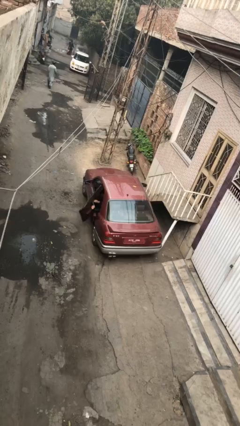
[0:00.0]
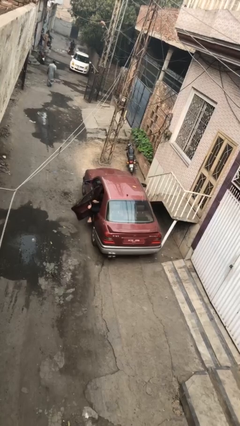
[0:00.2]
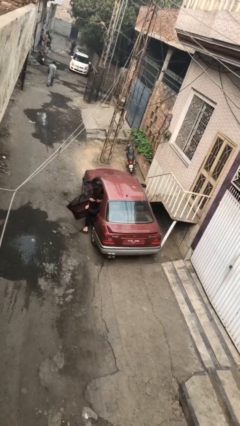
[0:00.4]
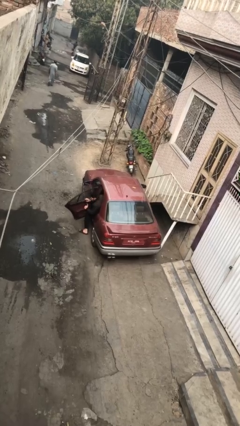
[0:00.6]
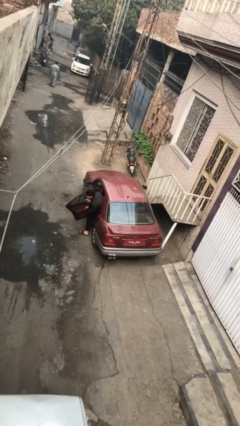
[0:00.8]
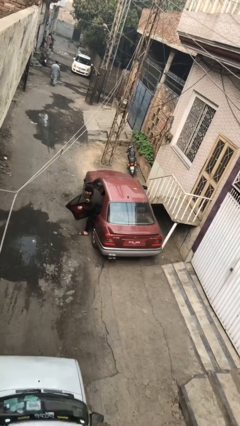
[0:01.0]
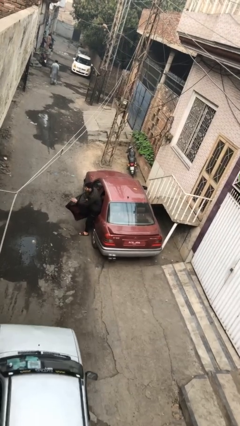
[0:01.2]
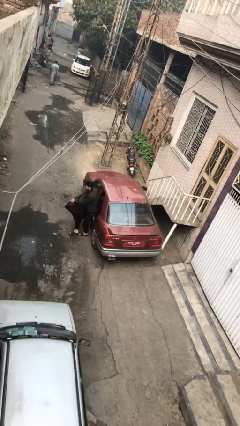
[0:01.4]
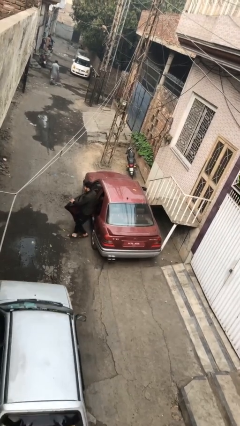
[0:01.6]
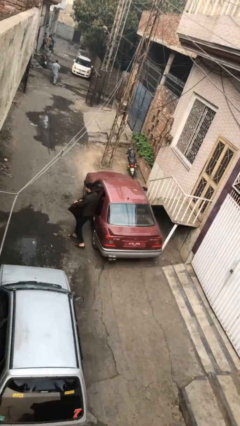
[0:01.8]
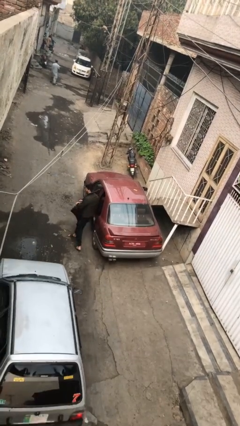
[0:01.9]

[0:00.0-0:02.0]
car drops off person

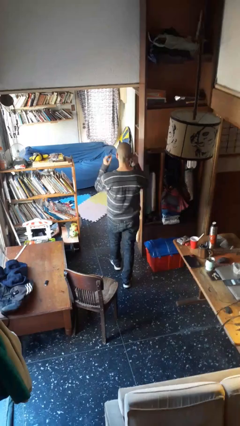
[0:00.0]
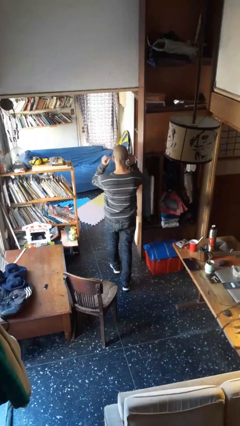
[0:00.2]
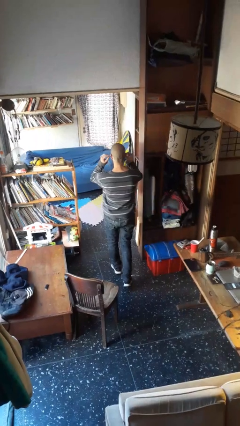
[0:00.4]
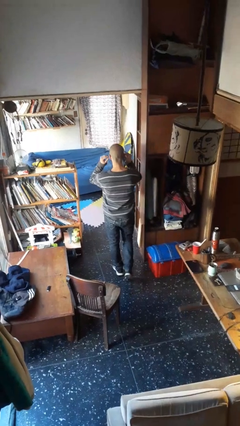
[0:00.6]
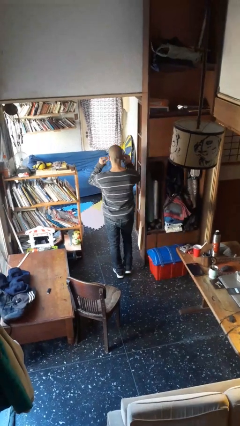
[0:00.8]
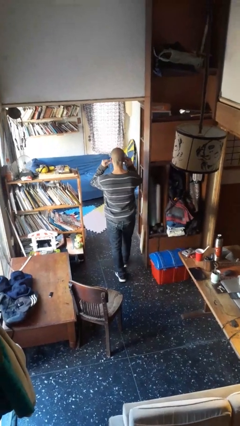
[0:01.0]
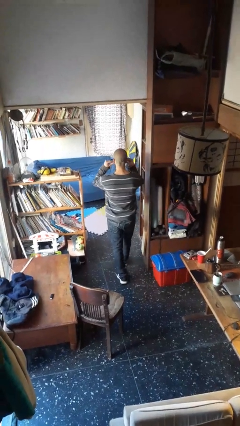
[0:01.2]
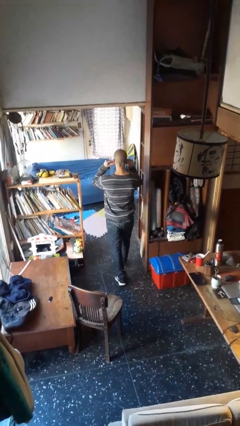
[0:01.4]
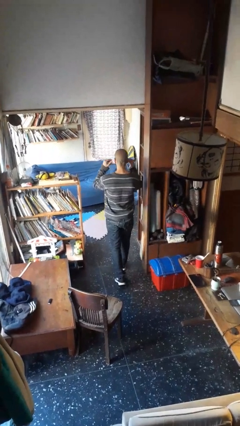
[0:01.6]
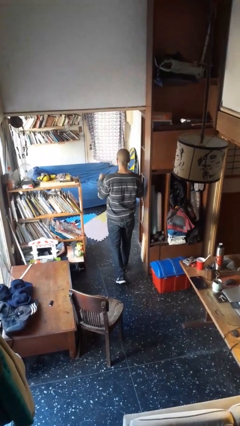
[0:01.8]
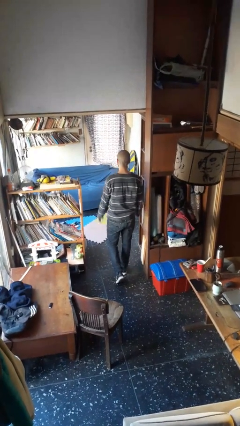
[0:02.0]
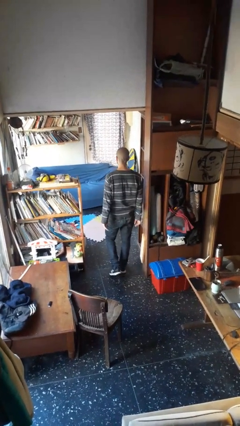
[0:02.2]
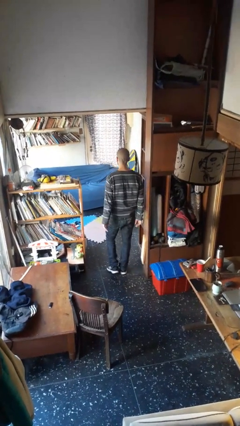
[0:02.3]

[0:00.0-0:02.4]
person puts on headphones

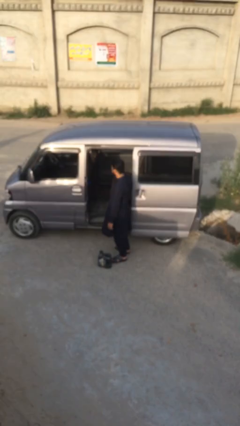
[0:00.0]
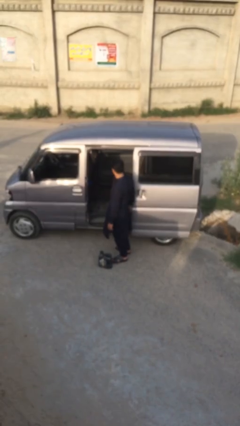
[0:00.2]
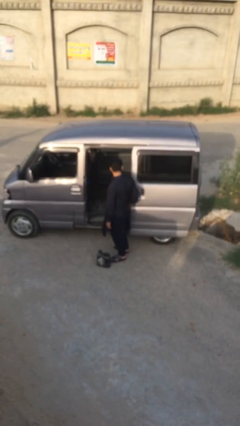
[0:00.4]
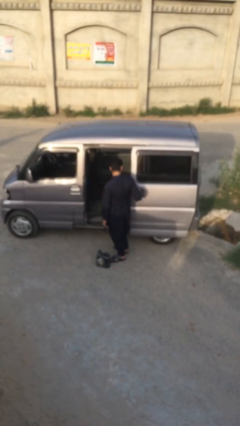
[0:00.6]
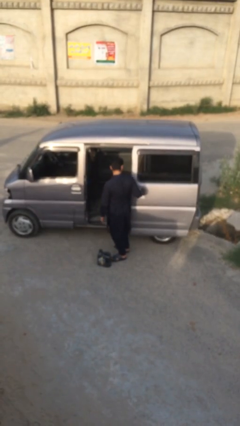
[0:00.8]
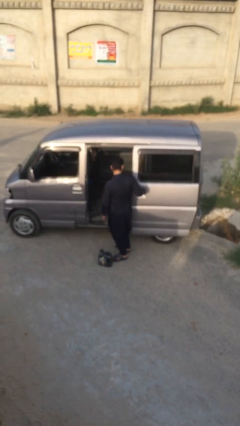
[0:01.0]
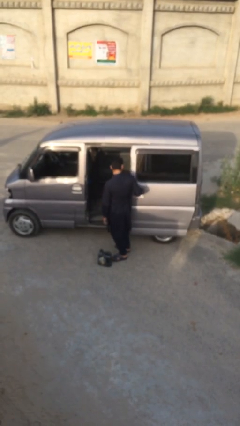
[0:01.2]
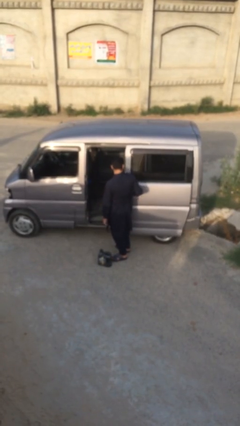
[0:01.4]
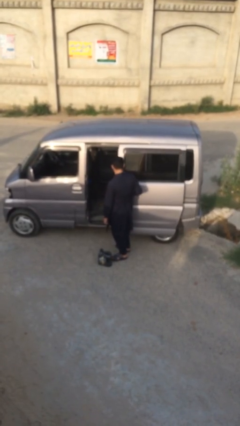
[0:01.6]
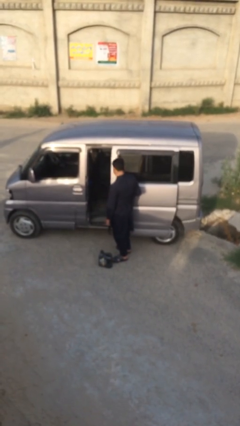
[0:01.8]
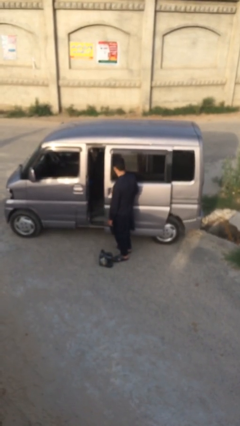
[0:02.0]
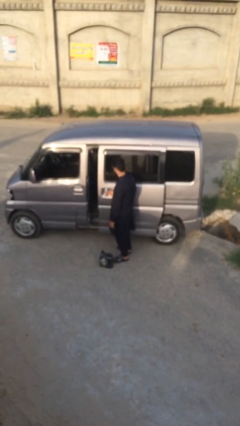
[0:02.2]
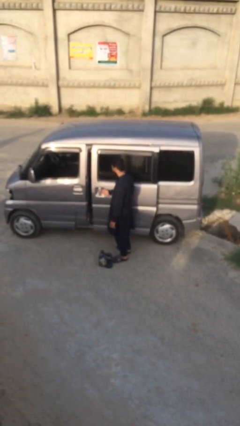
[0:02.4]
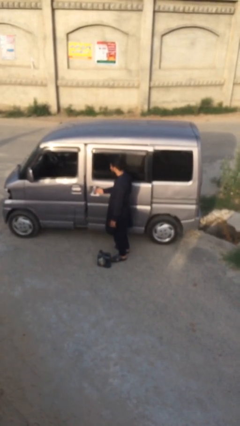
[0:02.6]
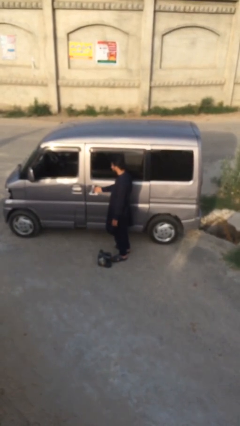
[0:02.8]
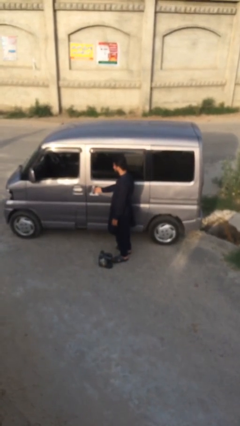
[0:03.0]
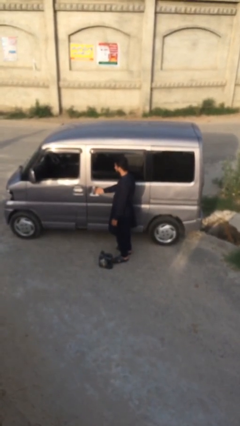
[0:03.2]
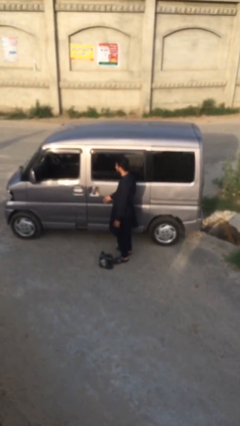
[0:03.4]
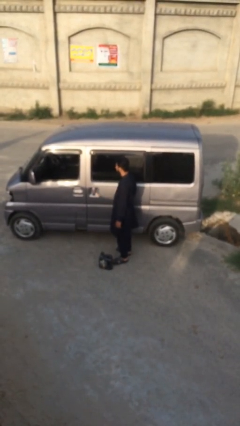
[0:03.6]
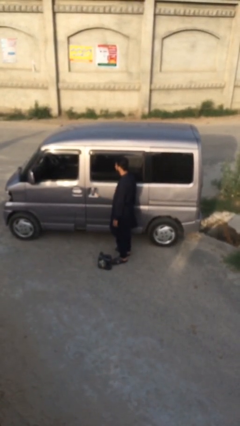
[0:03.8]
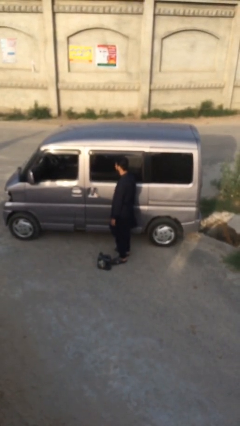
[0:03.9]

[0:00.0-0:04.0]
person closes car door

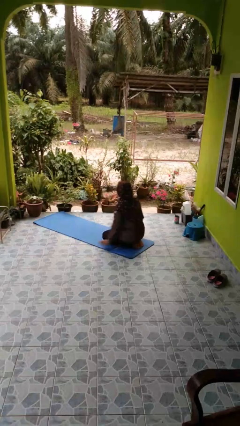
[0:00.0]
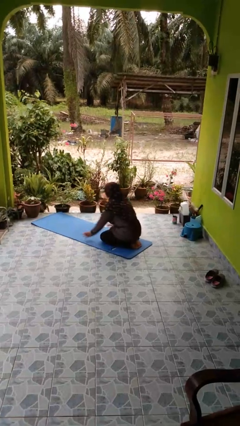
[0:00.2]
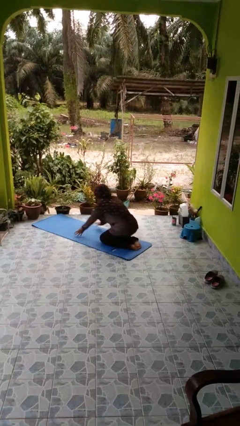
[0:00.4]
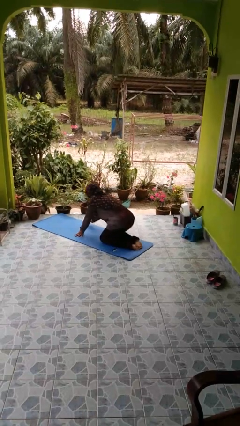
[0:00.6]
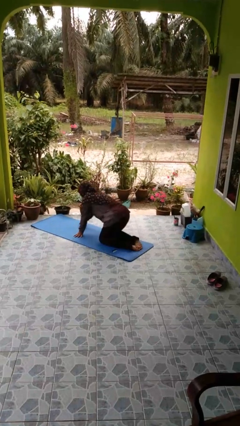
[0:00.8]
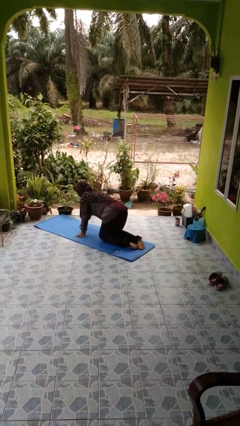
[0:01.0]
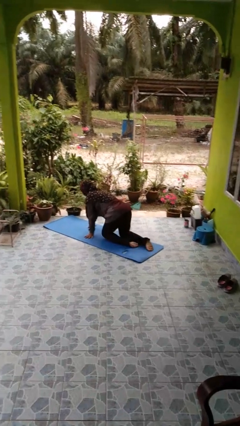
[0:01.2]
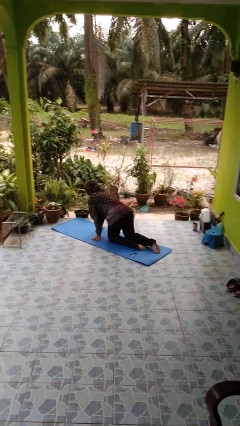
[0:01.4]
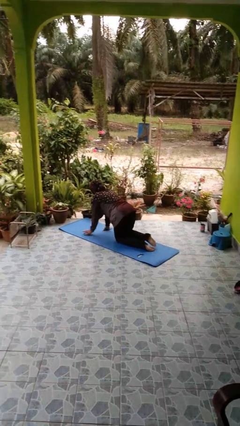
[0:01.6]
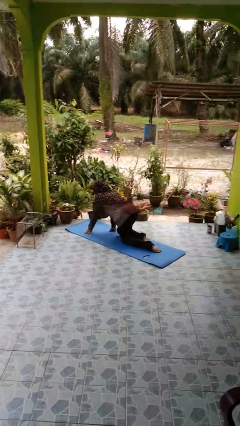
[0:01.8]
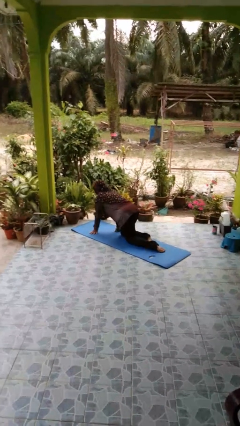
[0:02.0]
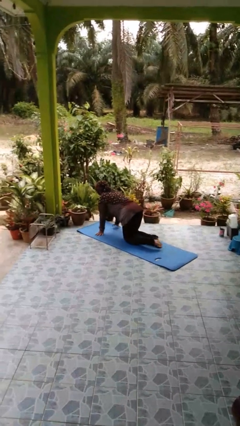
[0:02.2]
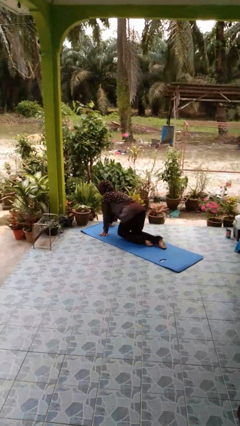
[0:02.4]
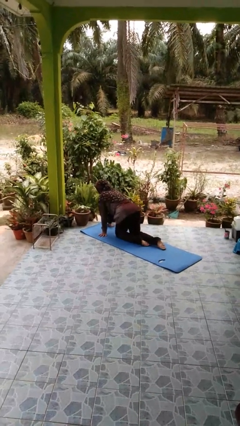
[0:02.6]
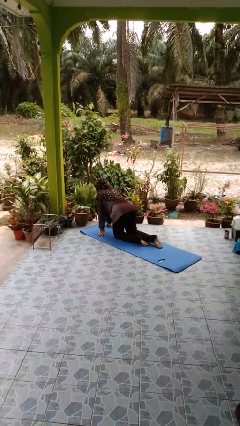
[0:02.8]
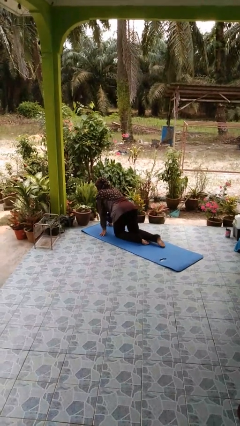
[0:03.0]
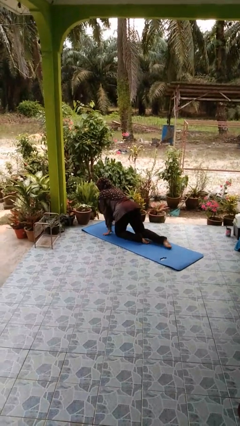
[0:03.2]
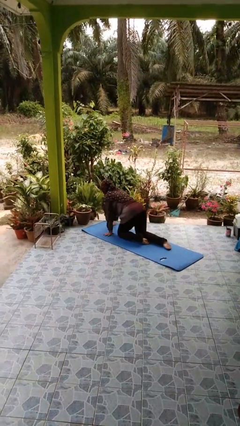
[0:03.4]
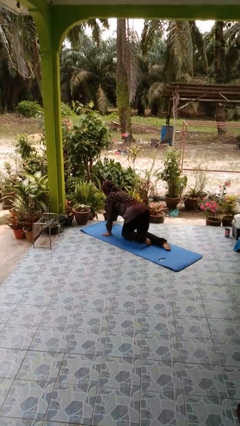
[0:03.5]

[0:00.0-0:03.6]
person crawls

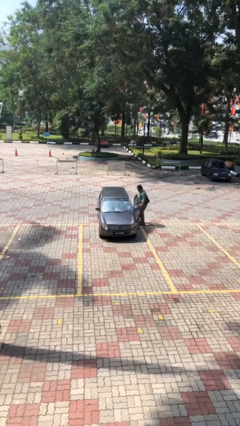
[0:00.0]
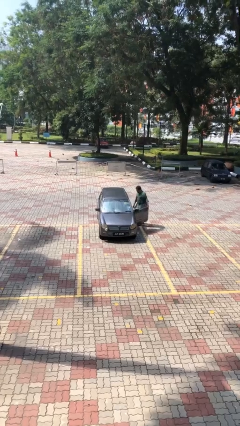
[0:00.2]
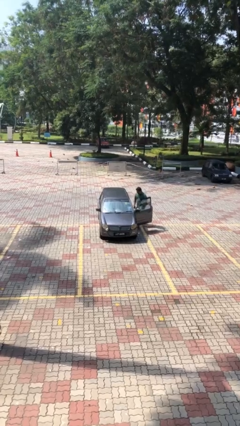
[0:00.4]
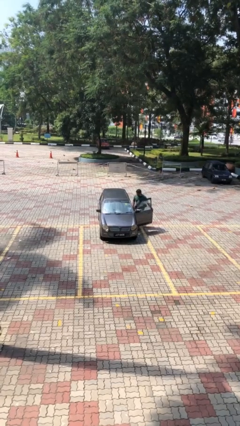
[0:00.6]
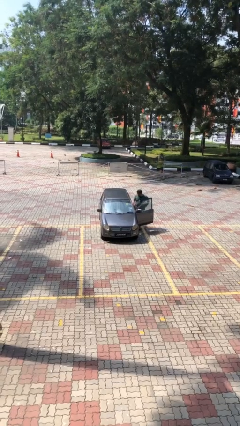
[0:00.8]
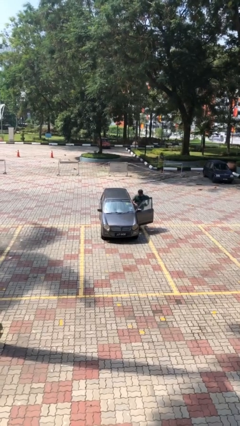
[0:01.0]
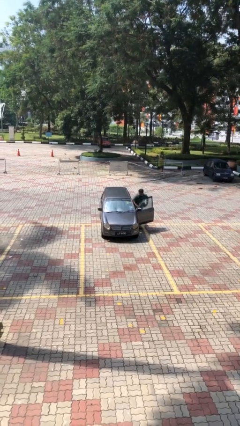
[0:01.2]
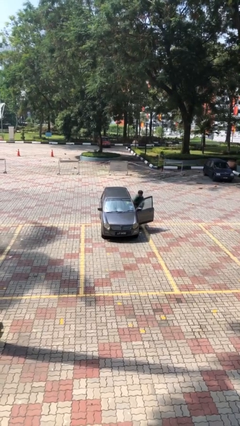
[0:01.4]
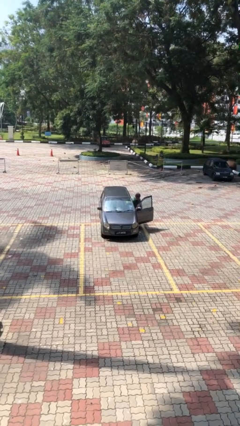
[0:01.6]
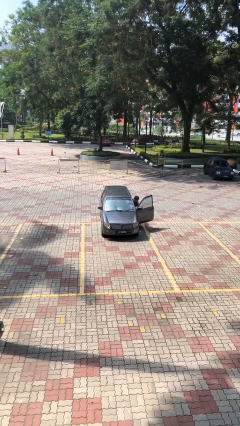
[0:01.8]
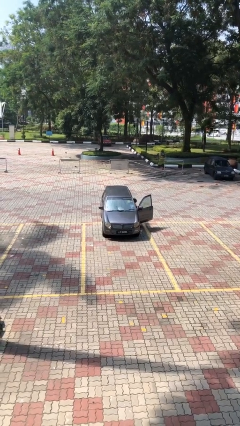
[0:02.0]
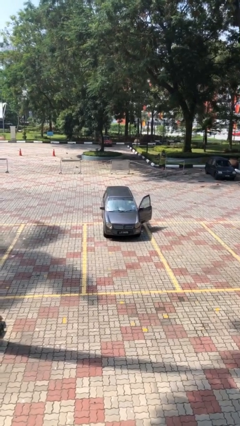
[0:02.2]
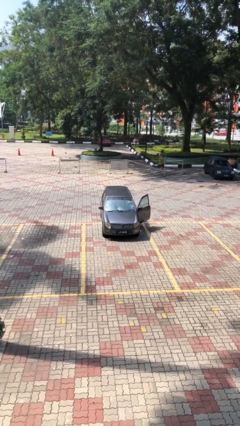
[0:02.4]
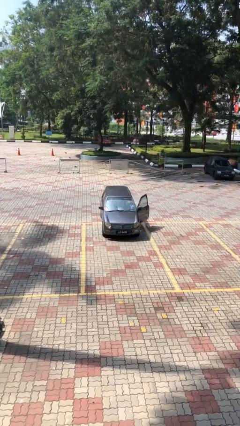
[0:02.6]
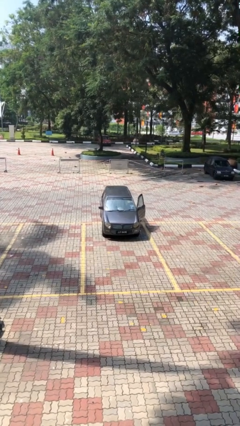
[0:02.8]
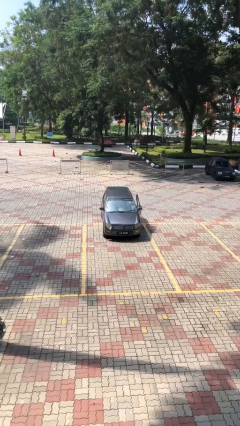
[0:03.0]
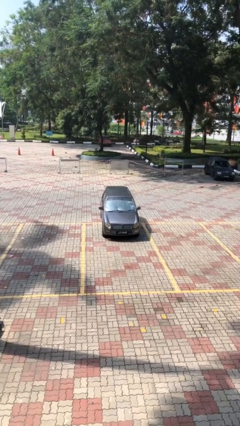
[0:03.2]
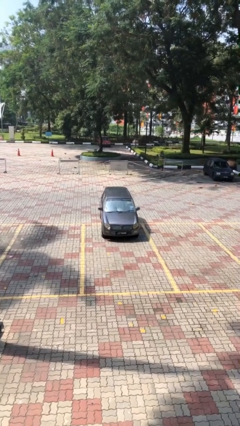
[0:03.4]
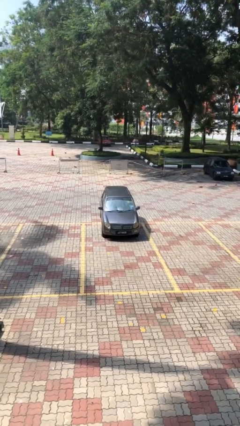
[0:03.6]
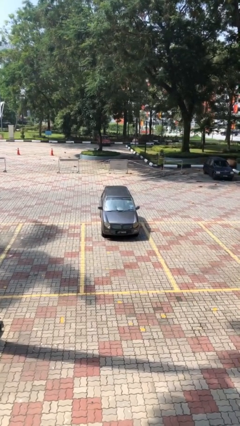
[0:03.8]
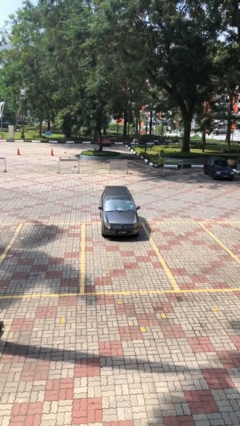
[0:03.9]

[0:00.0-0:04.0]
car picks up person

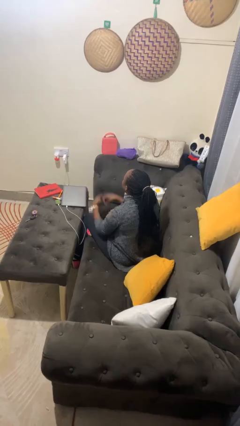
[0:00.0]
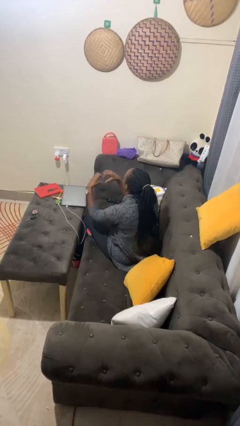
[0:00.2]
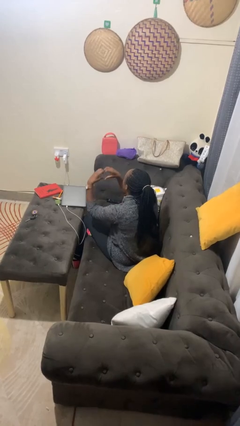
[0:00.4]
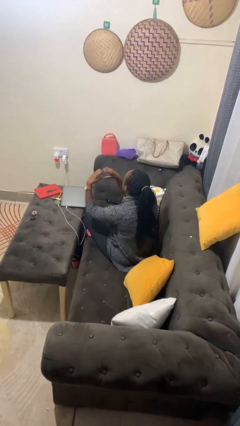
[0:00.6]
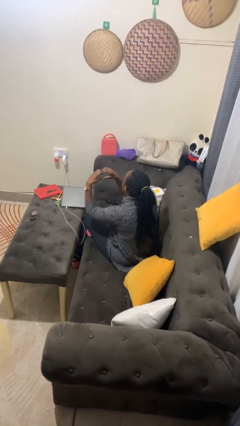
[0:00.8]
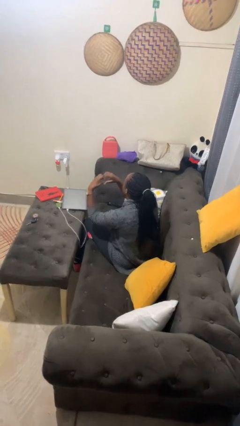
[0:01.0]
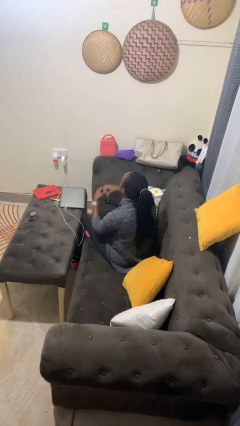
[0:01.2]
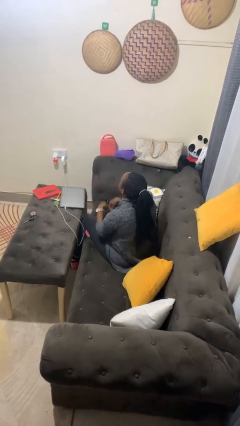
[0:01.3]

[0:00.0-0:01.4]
person gestures heart
